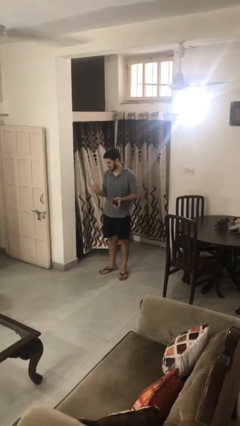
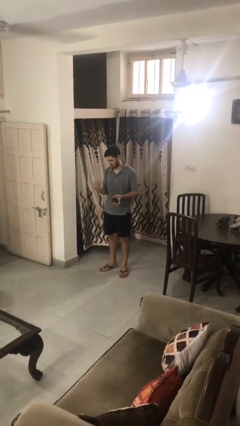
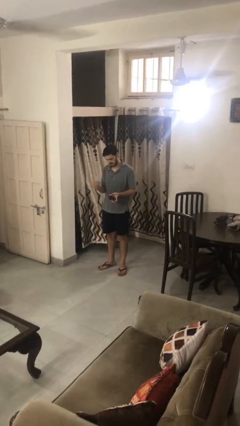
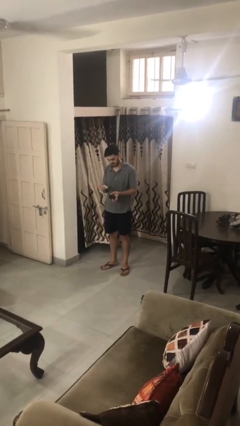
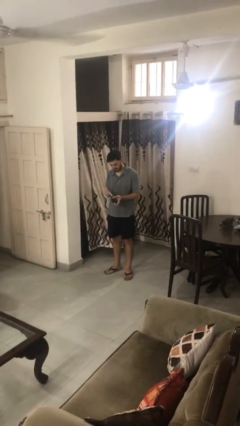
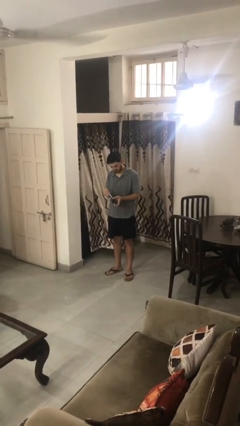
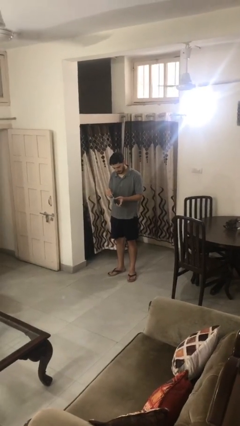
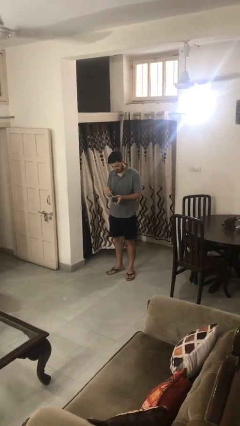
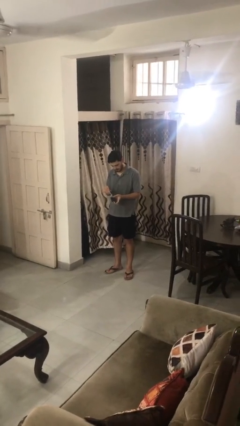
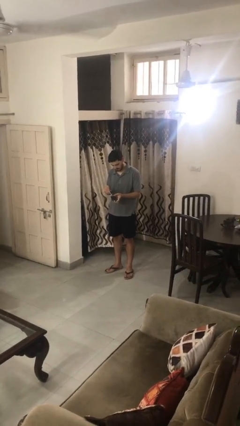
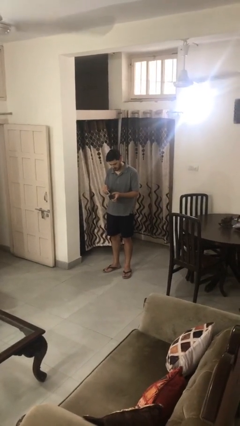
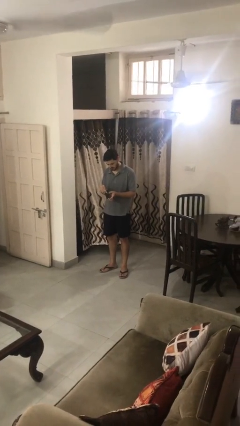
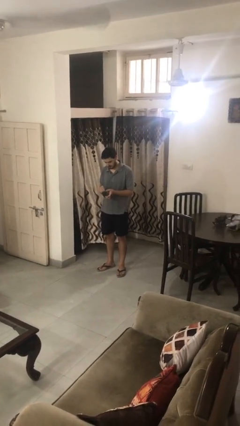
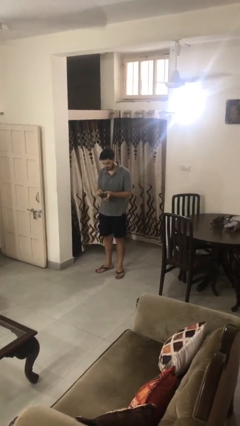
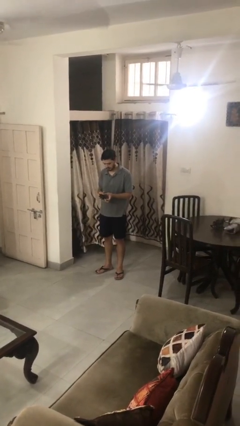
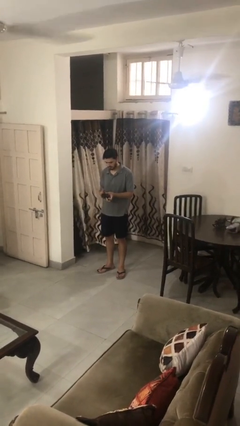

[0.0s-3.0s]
person puts object into purse

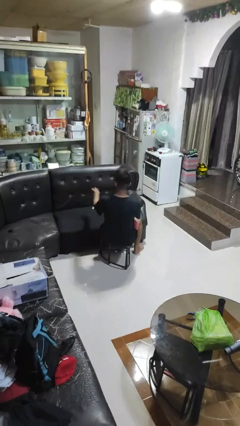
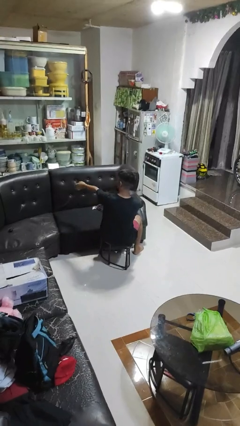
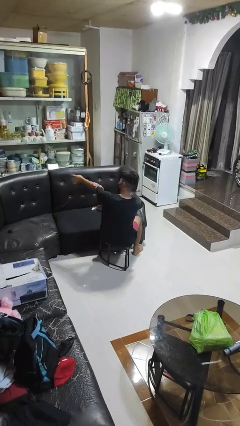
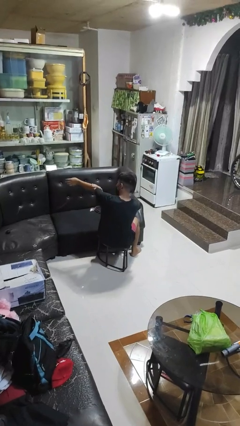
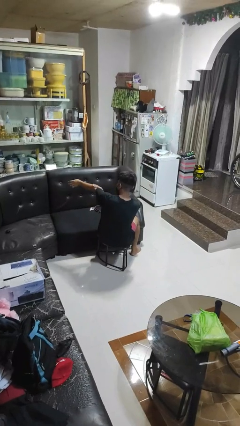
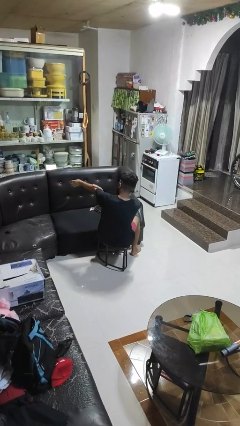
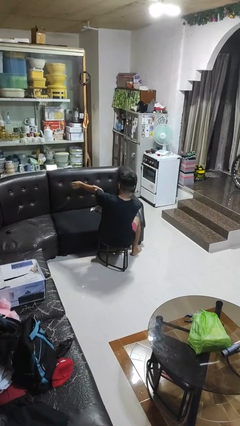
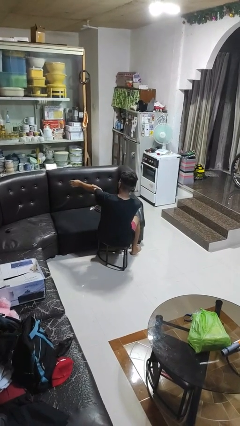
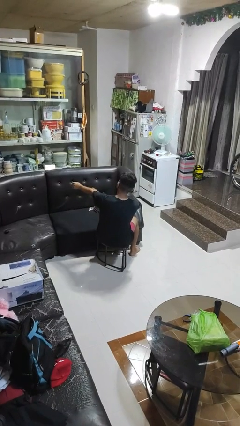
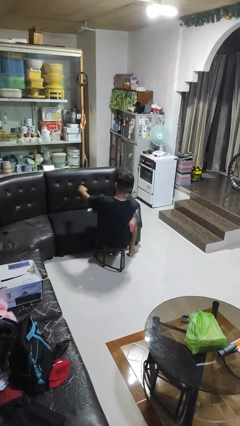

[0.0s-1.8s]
person swats bug

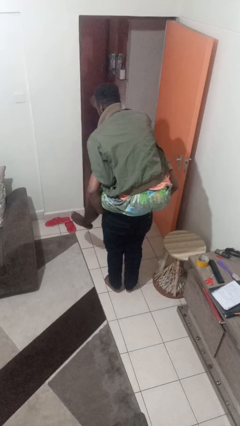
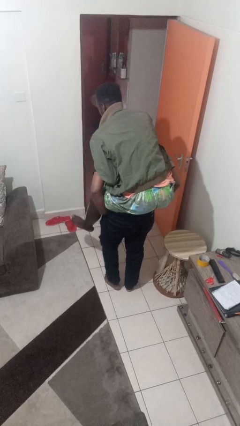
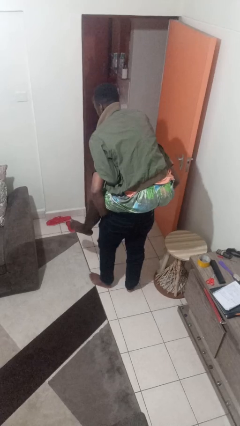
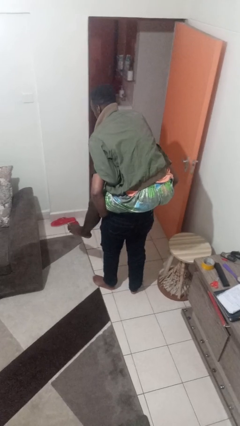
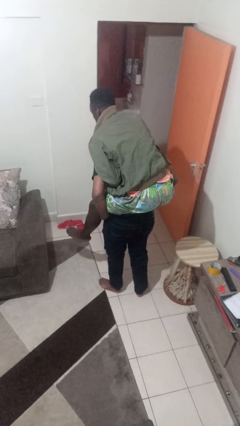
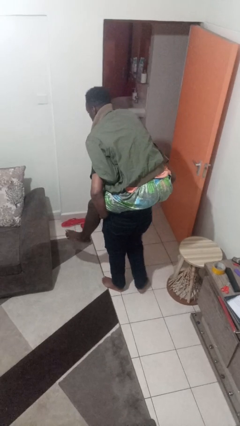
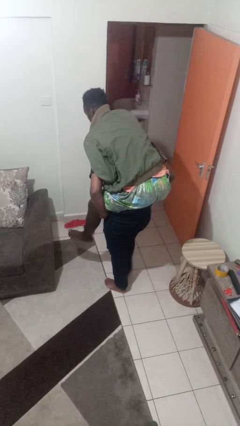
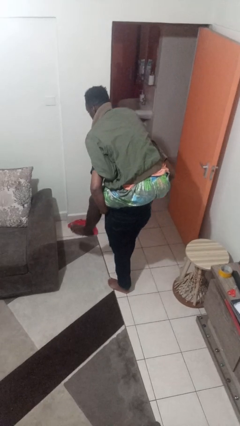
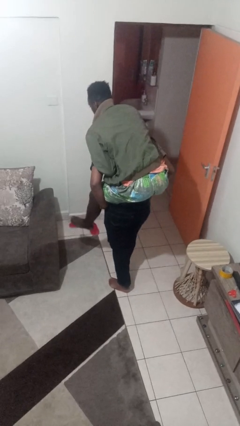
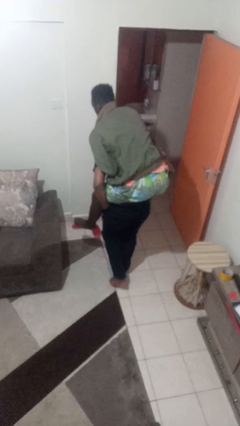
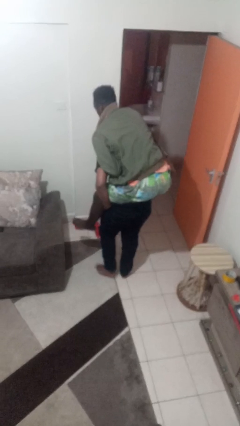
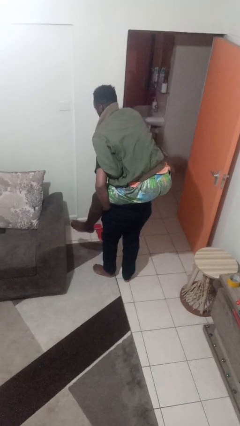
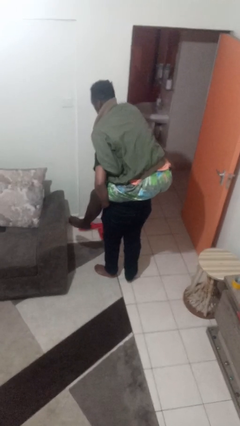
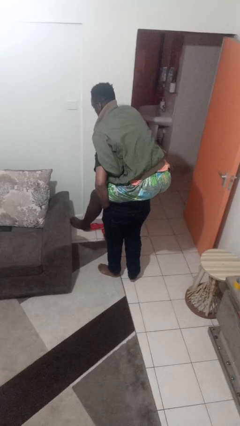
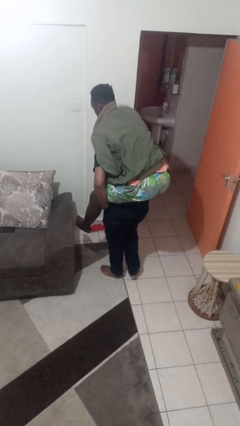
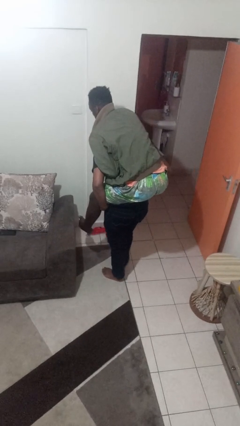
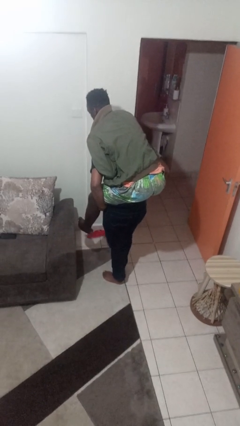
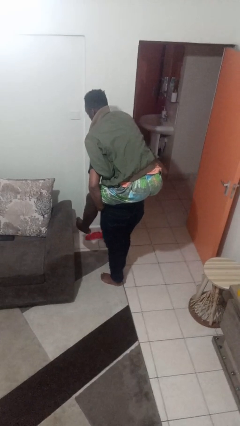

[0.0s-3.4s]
person carries person on back

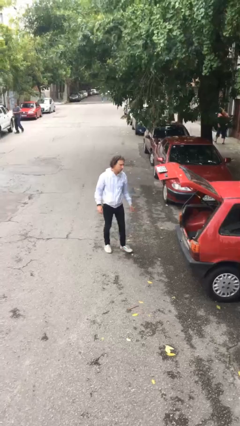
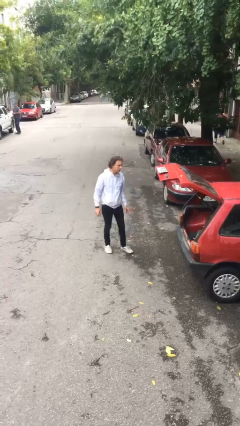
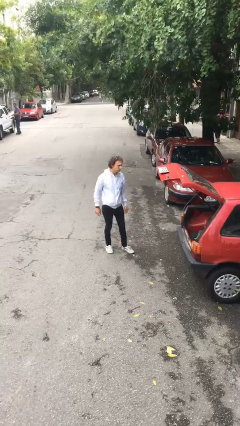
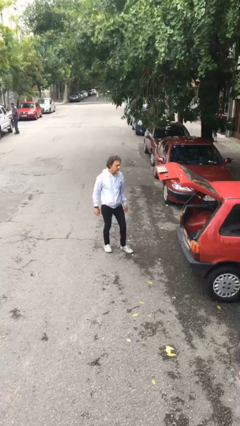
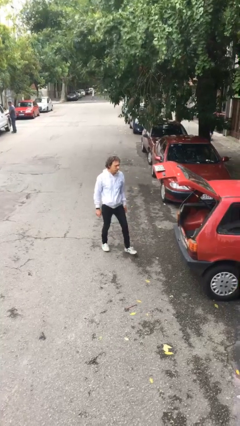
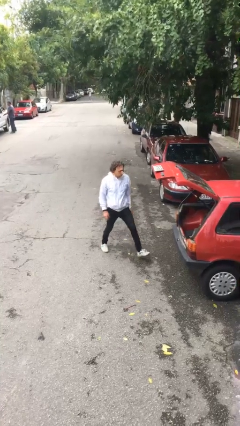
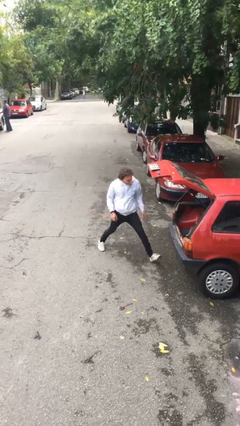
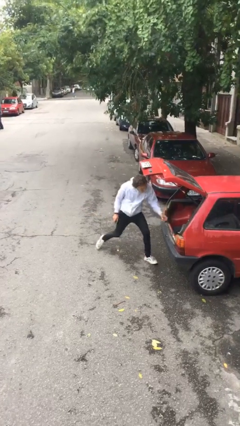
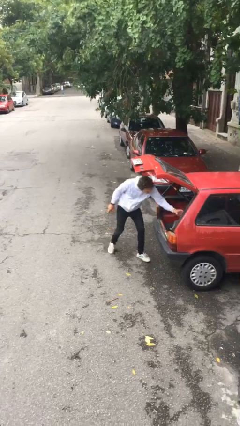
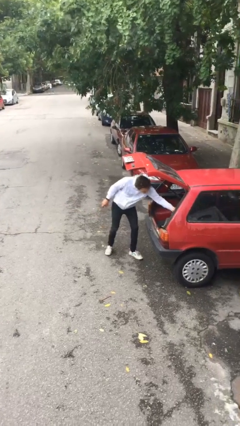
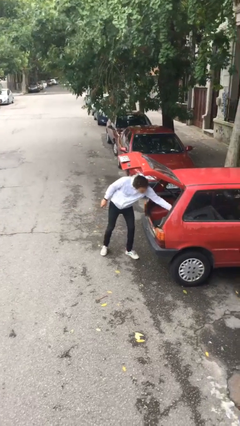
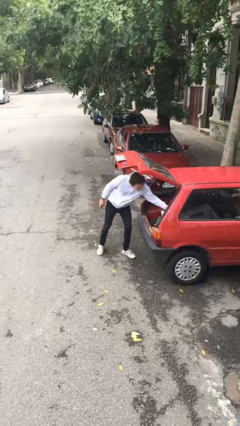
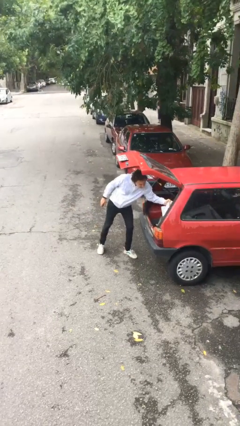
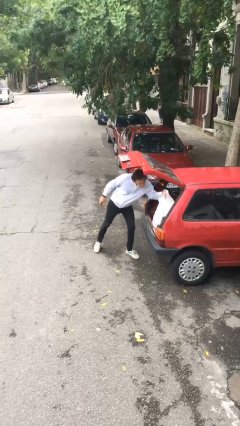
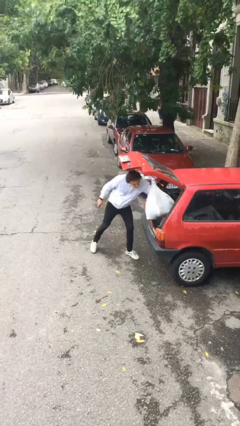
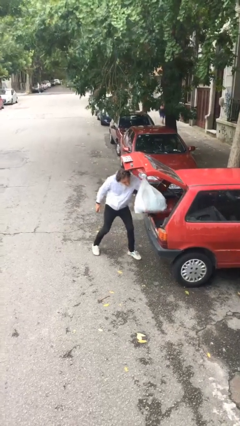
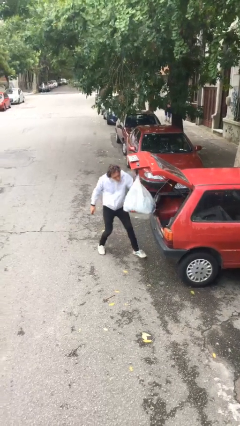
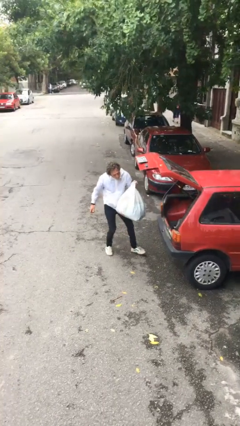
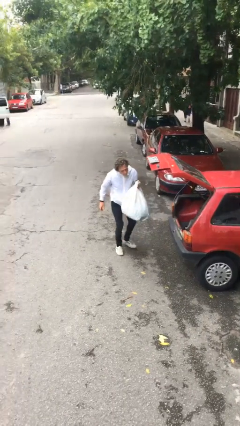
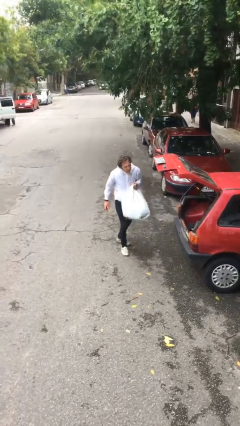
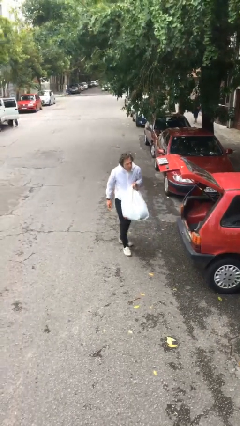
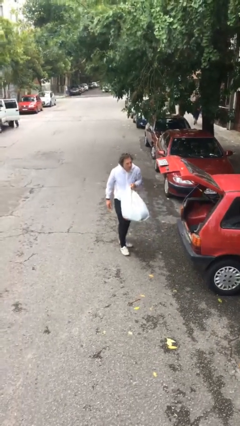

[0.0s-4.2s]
person unloads car

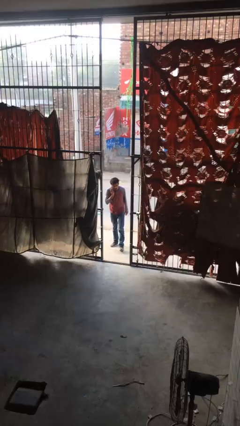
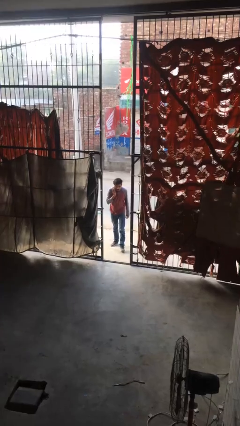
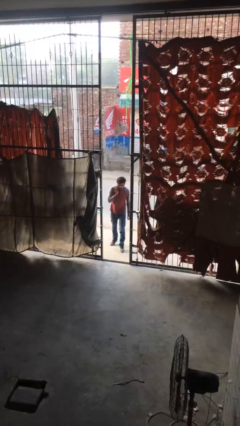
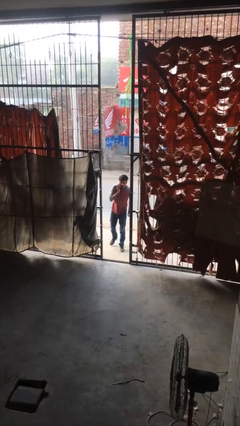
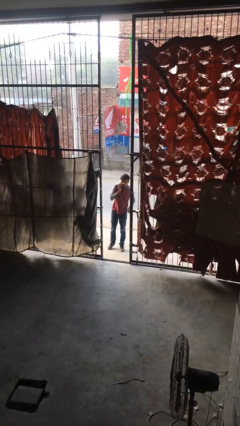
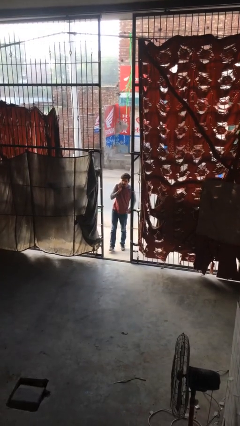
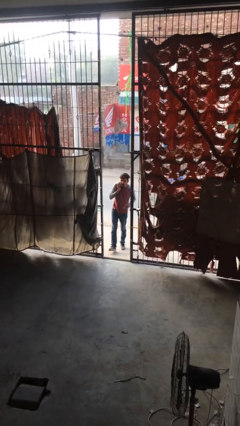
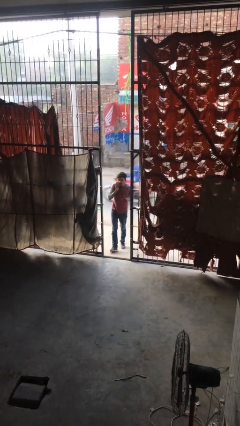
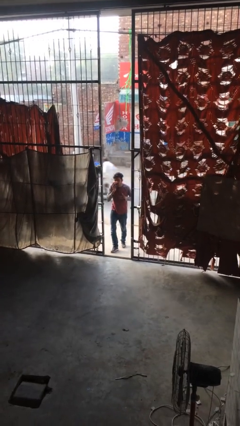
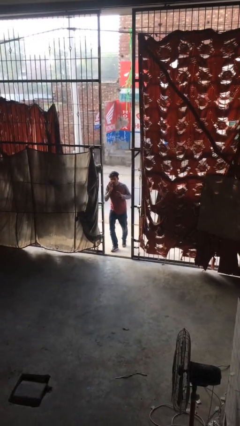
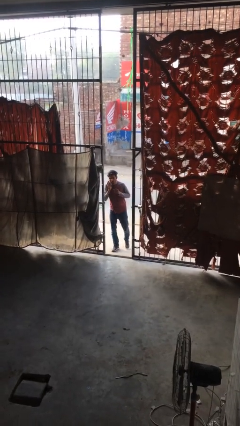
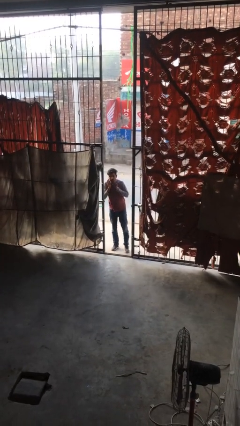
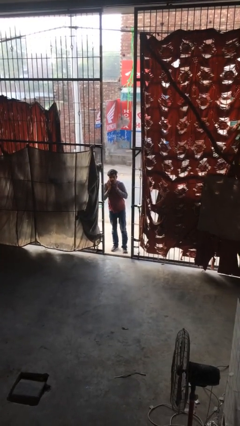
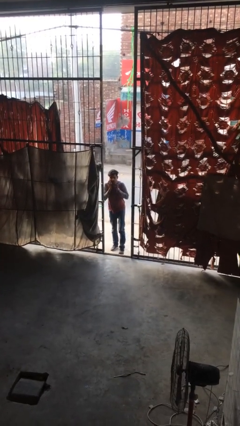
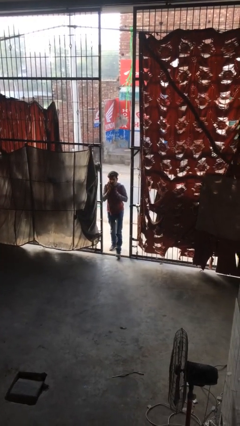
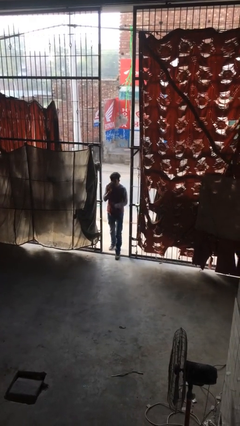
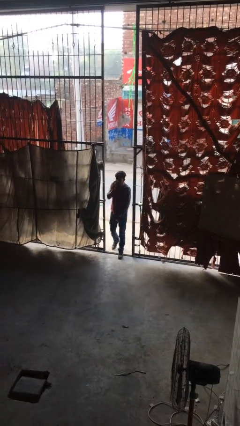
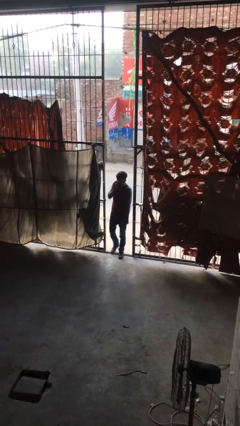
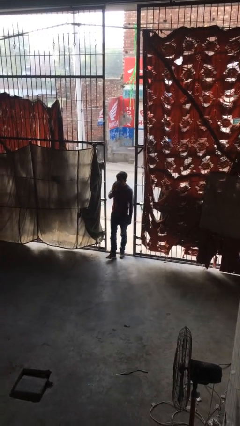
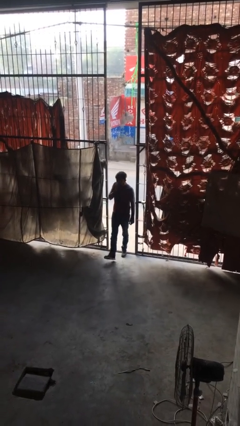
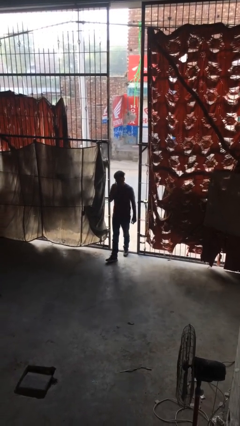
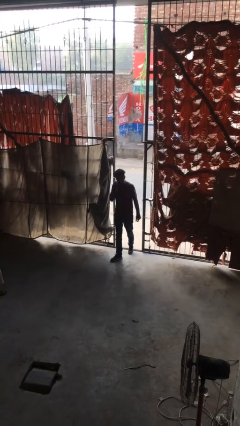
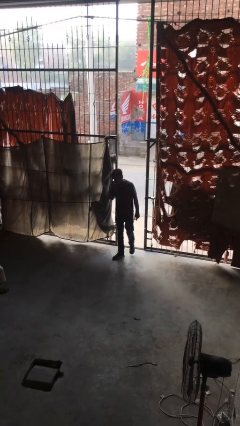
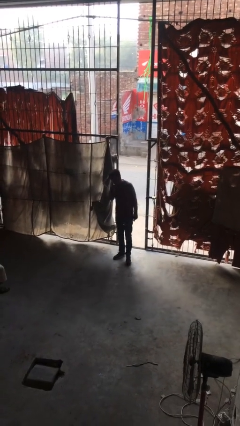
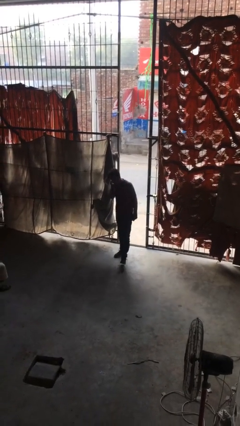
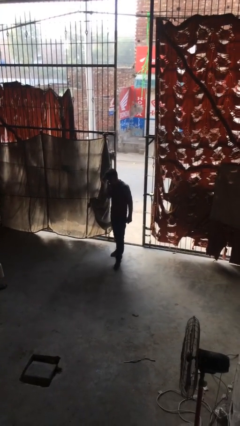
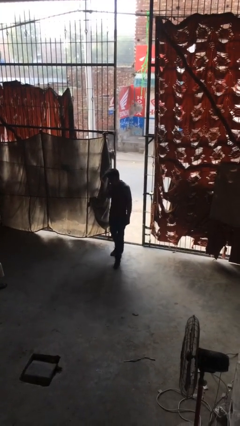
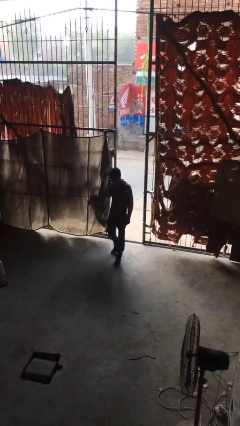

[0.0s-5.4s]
person enters scene through structure
